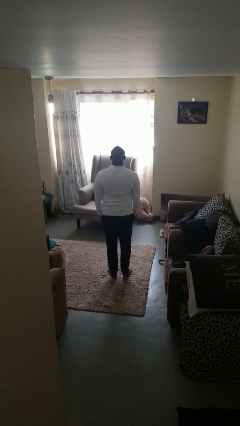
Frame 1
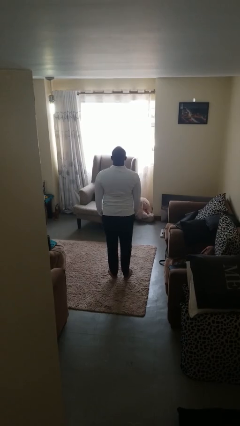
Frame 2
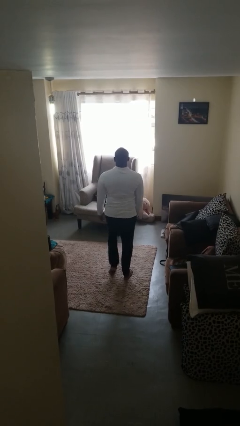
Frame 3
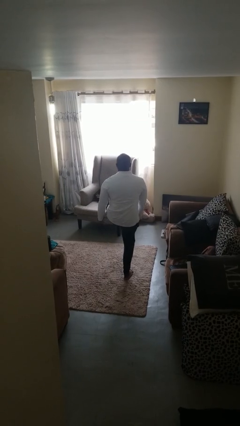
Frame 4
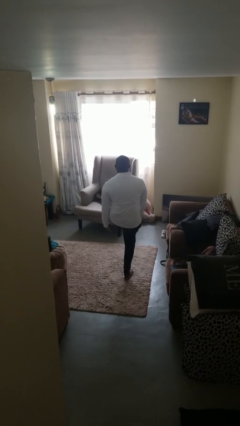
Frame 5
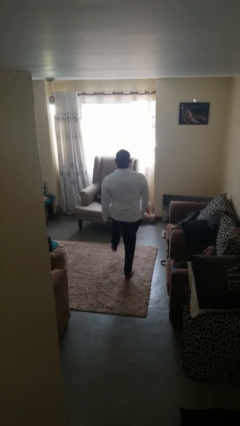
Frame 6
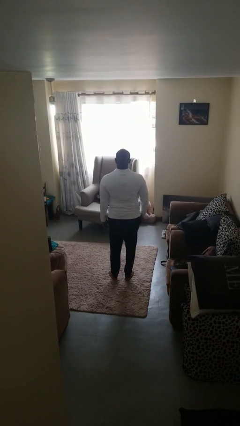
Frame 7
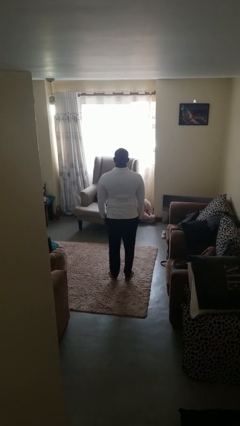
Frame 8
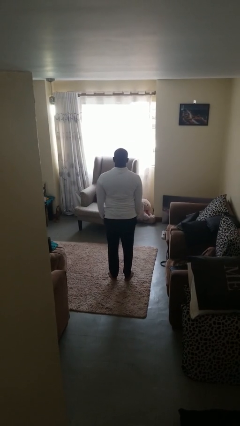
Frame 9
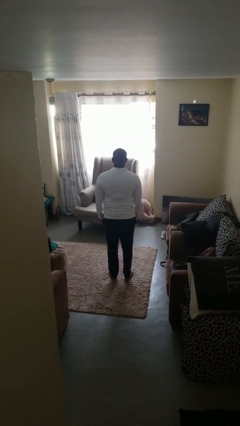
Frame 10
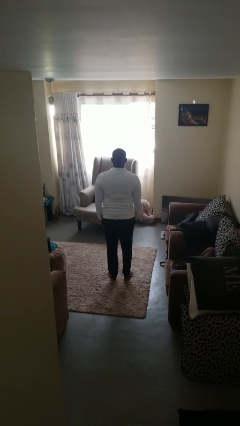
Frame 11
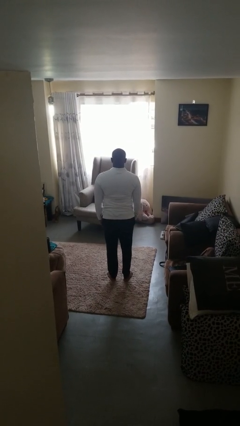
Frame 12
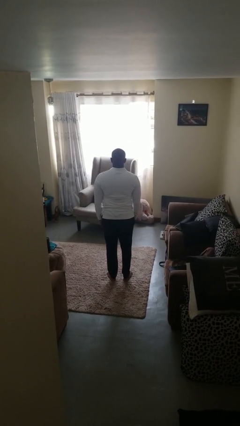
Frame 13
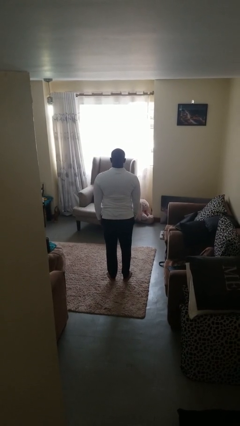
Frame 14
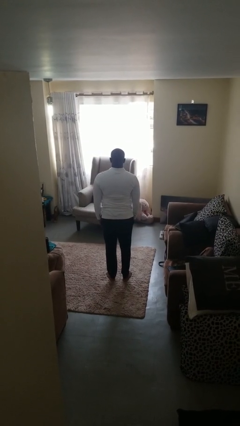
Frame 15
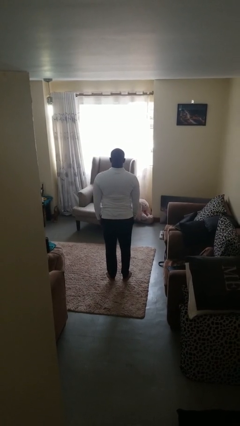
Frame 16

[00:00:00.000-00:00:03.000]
person karate kicks

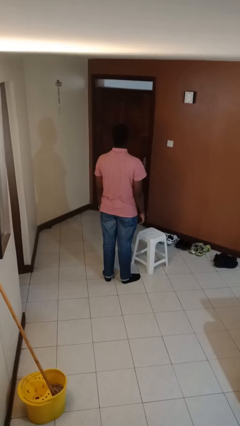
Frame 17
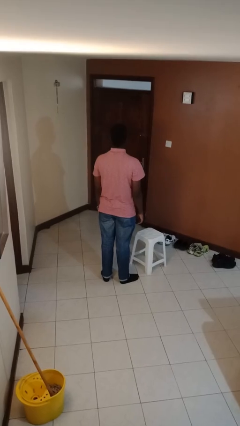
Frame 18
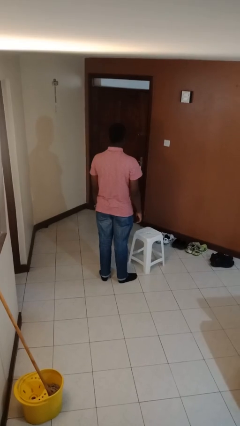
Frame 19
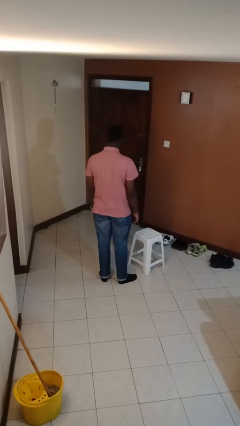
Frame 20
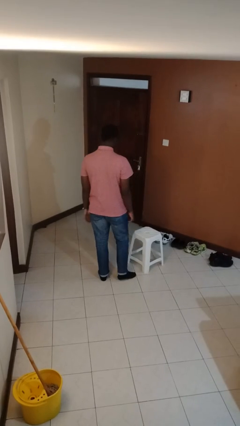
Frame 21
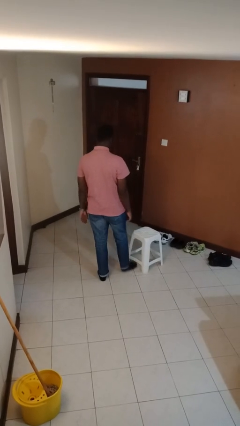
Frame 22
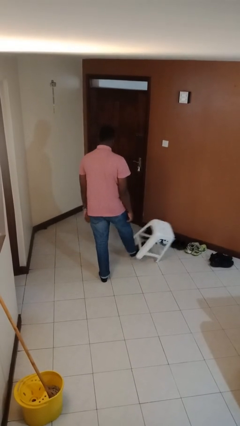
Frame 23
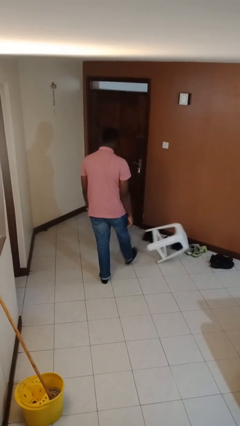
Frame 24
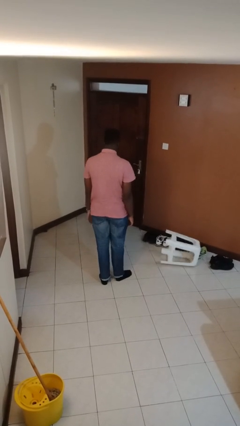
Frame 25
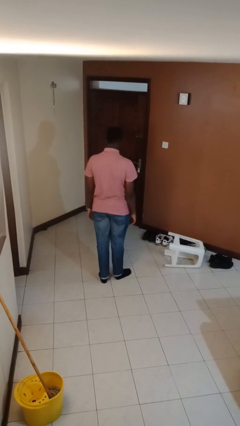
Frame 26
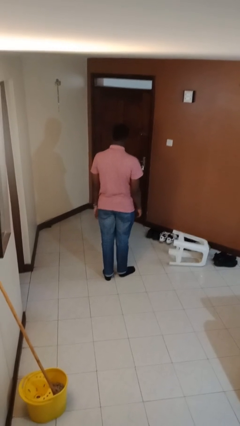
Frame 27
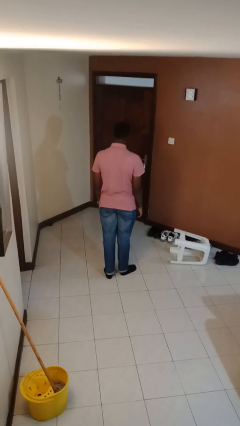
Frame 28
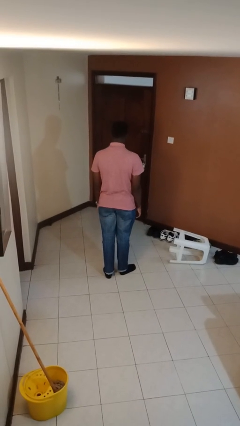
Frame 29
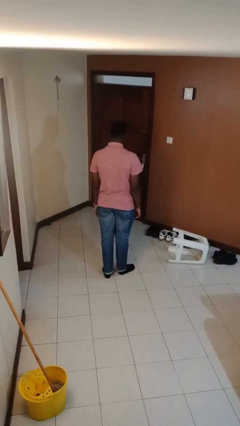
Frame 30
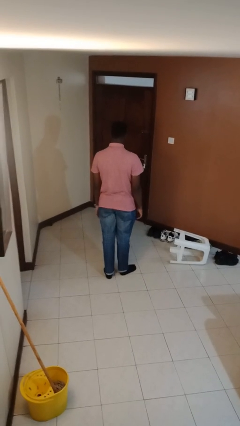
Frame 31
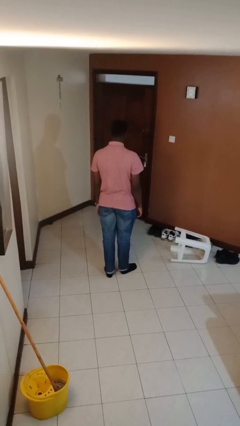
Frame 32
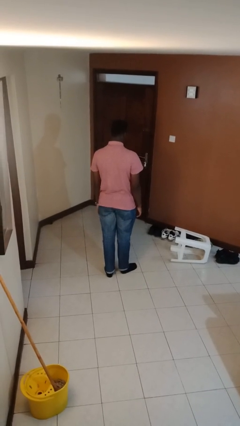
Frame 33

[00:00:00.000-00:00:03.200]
person knocks over furniture

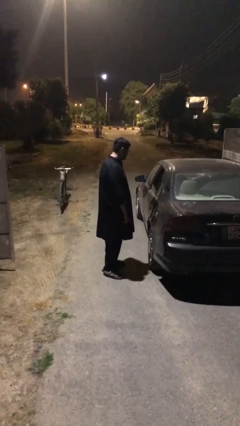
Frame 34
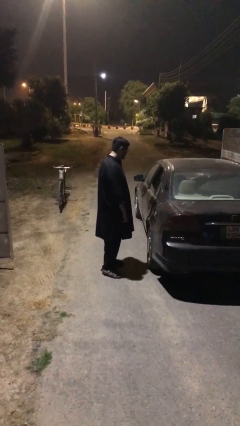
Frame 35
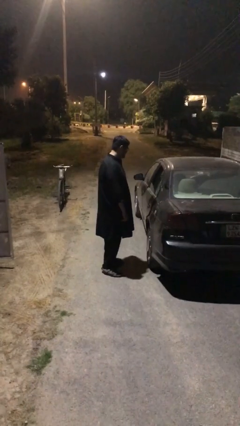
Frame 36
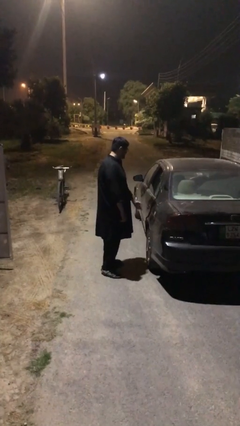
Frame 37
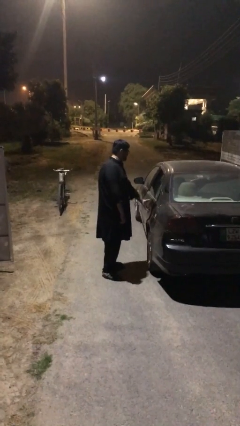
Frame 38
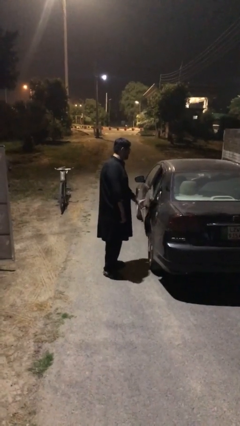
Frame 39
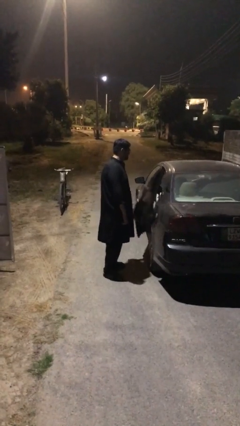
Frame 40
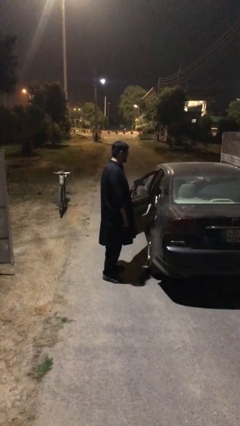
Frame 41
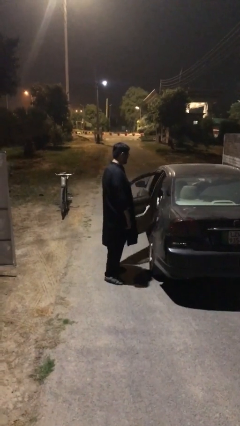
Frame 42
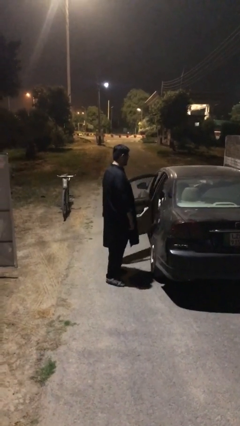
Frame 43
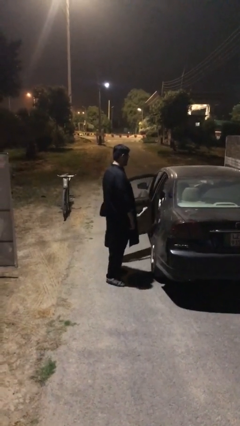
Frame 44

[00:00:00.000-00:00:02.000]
person opens car door

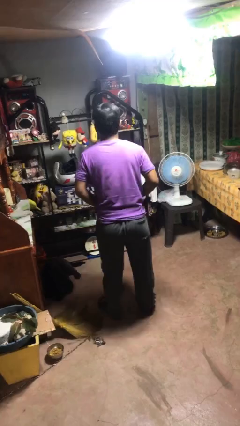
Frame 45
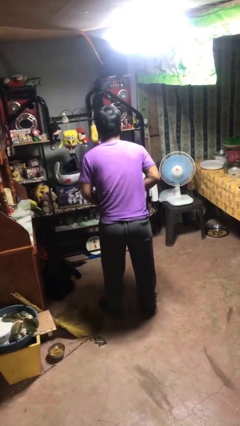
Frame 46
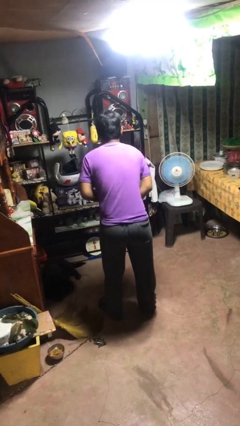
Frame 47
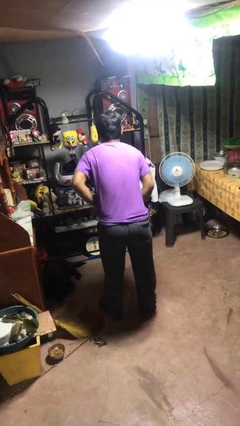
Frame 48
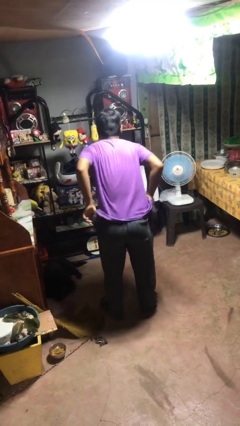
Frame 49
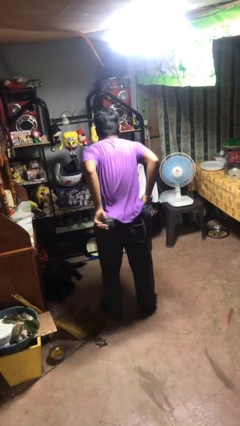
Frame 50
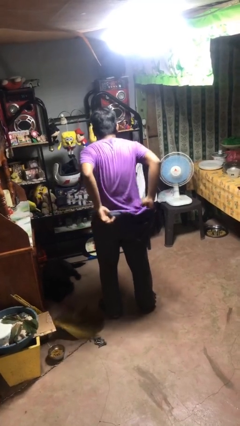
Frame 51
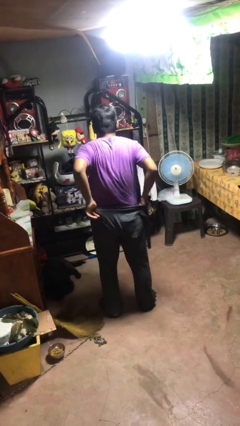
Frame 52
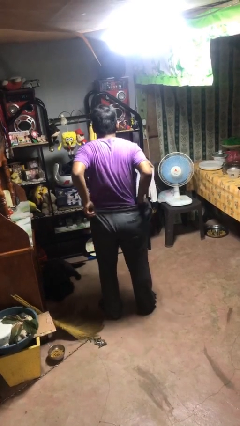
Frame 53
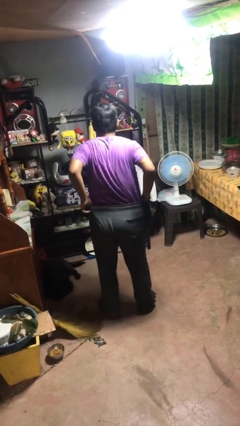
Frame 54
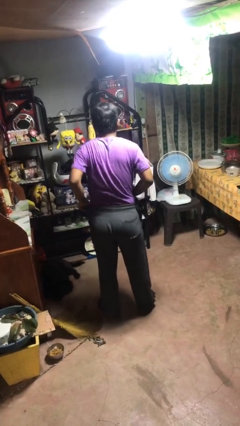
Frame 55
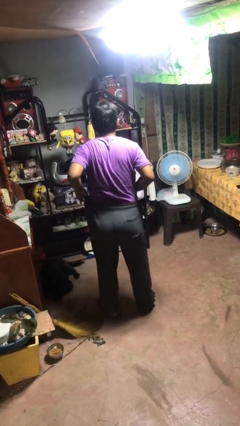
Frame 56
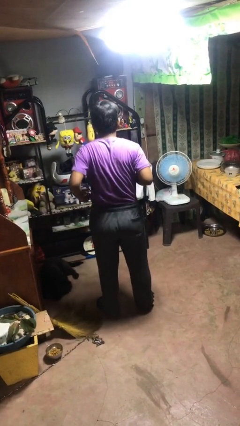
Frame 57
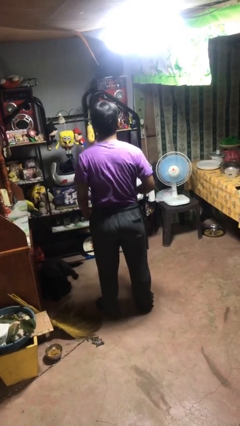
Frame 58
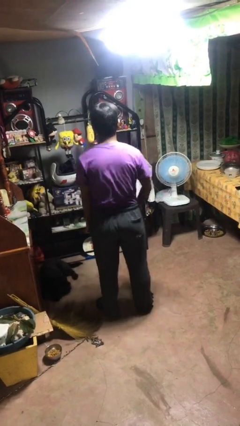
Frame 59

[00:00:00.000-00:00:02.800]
person tucks in shirt

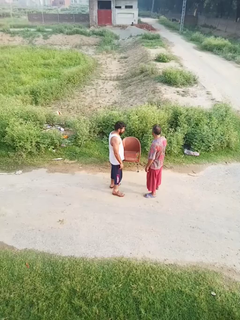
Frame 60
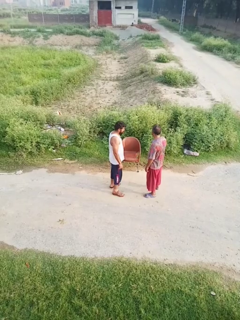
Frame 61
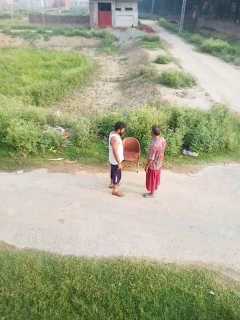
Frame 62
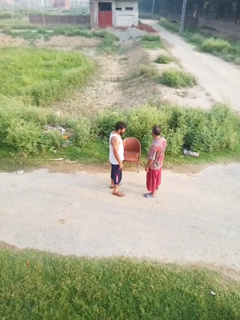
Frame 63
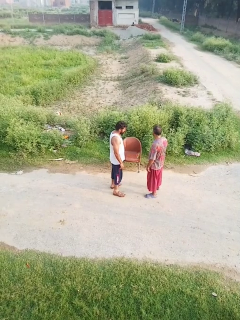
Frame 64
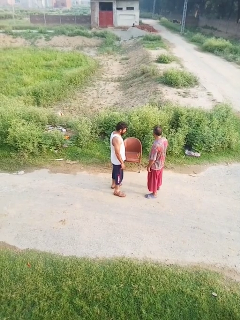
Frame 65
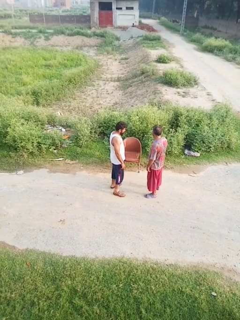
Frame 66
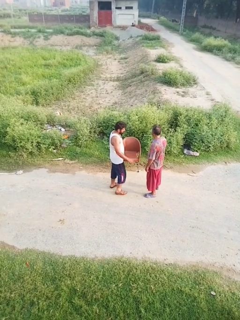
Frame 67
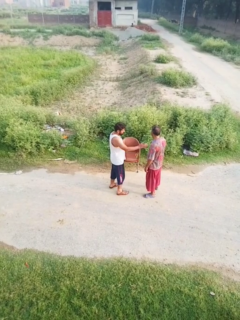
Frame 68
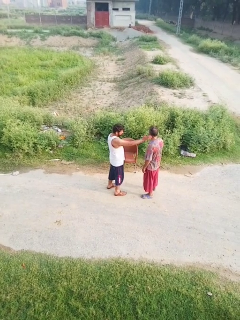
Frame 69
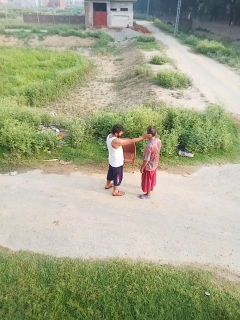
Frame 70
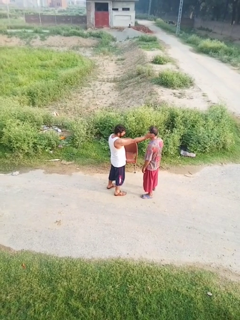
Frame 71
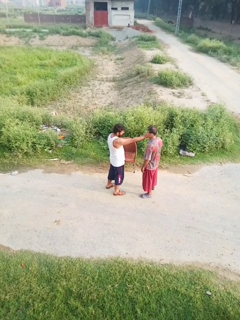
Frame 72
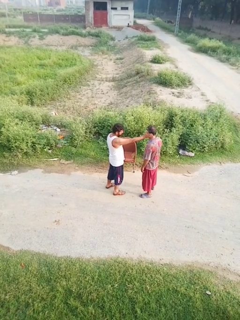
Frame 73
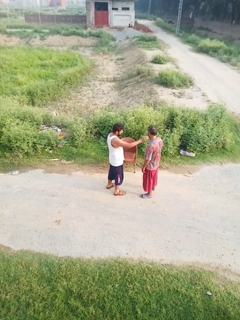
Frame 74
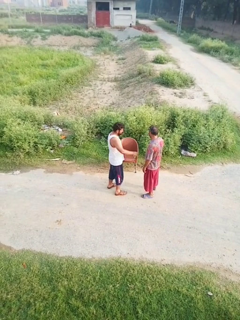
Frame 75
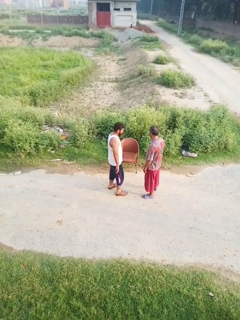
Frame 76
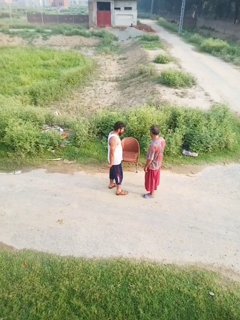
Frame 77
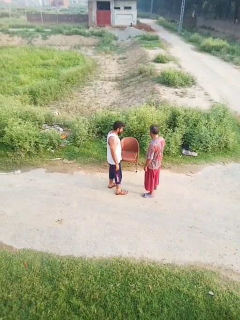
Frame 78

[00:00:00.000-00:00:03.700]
person touches face of person

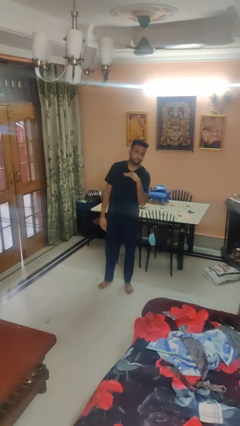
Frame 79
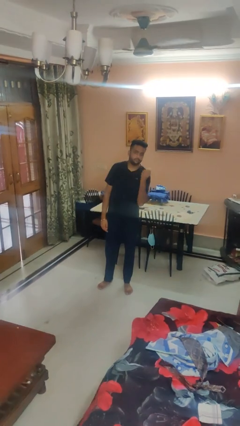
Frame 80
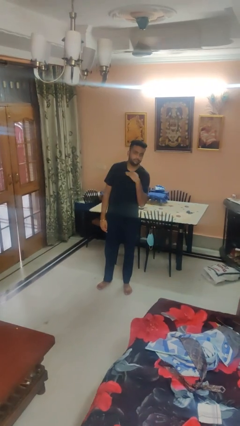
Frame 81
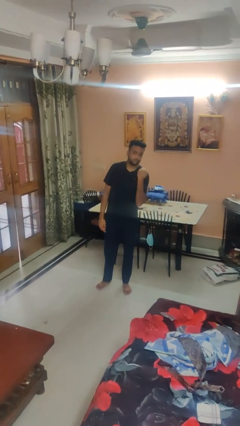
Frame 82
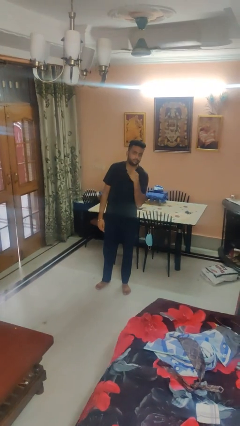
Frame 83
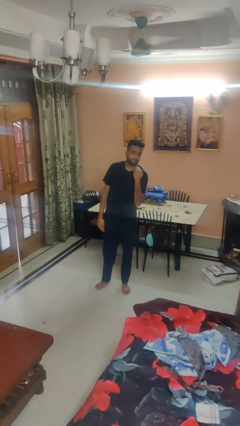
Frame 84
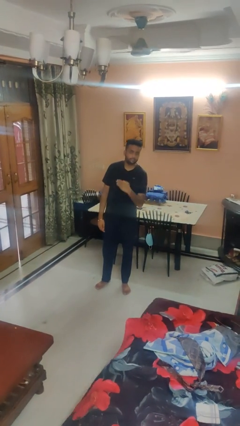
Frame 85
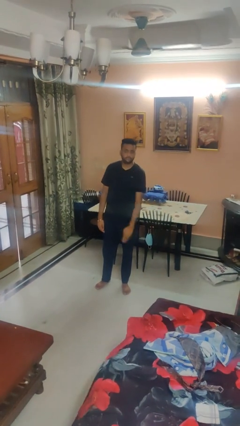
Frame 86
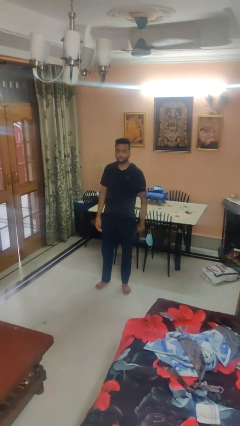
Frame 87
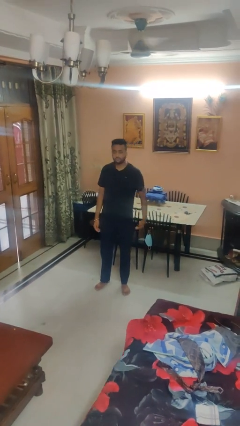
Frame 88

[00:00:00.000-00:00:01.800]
person gestures cut

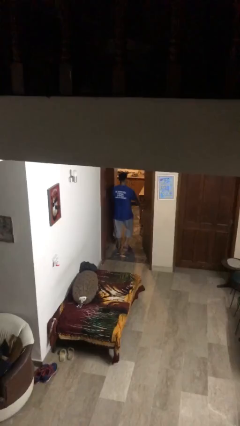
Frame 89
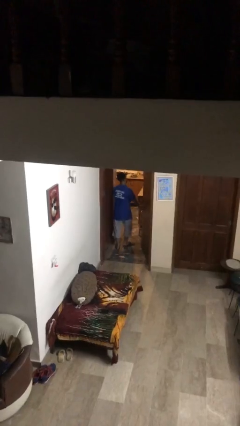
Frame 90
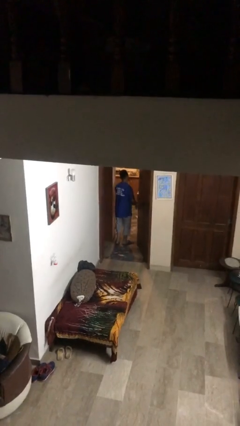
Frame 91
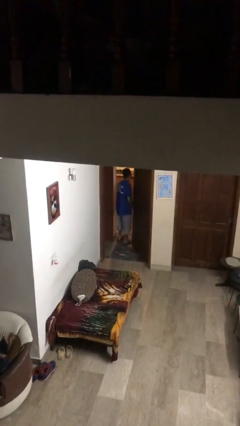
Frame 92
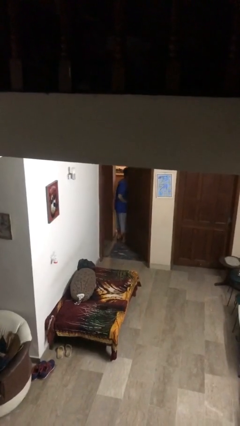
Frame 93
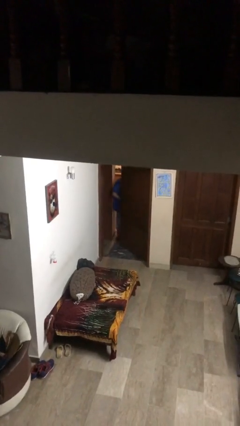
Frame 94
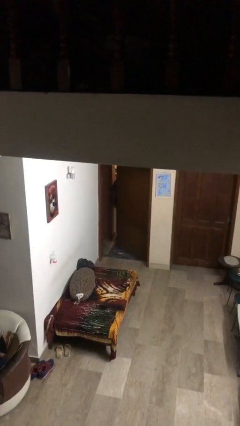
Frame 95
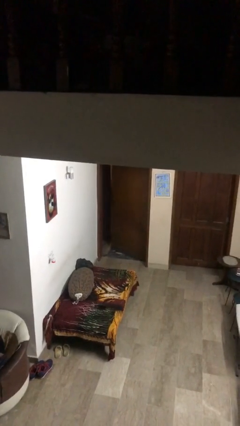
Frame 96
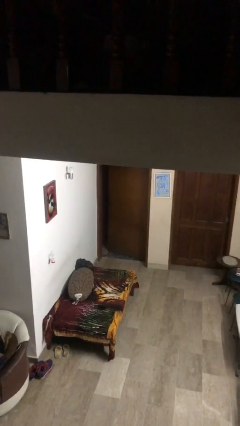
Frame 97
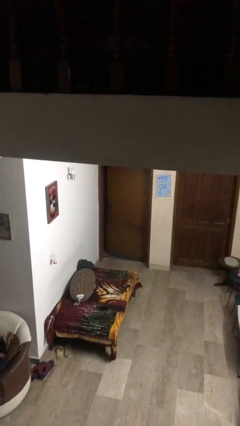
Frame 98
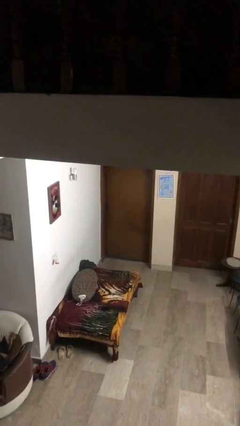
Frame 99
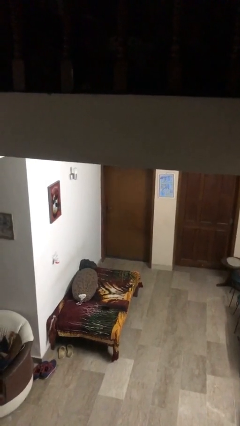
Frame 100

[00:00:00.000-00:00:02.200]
person closes facility door
